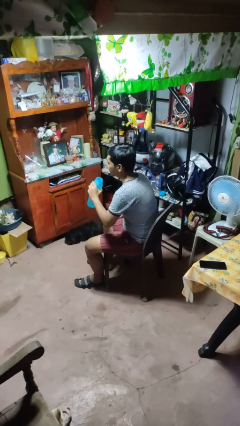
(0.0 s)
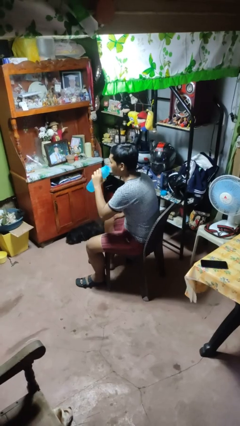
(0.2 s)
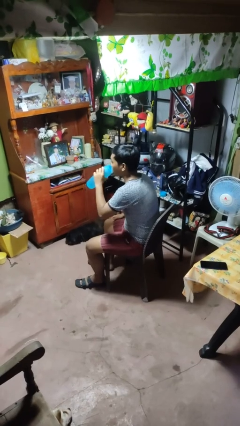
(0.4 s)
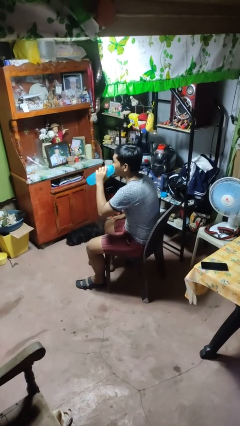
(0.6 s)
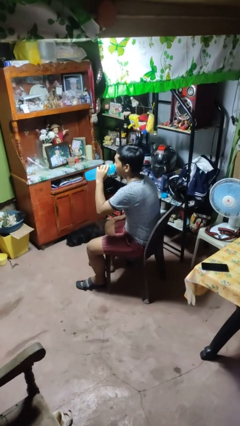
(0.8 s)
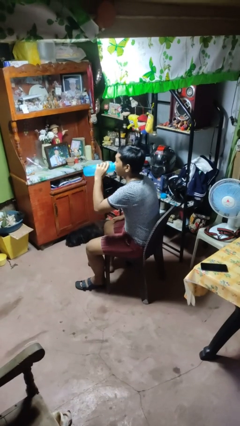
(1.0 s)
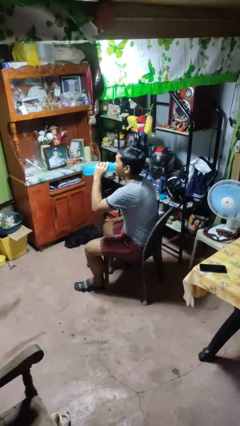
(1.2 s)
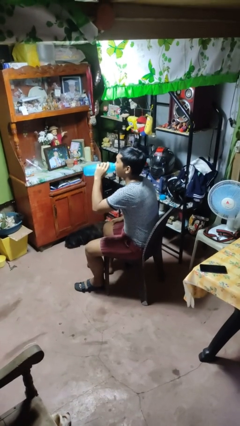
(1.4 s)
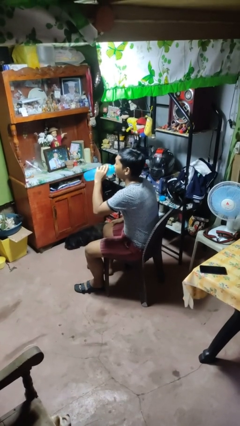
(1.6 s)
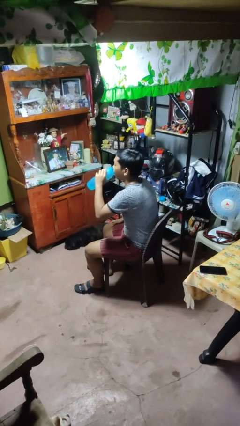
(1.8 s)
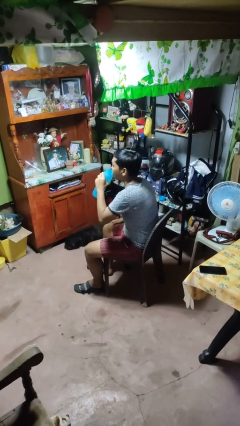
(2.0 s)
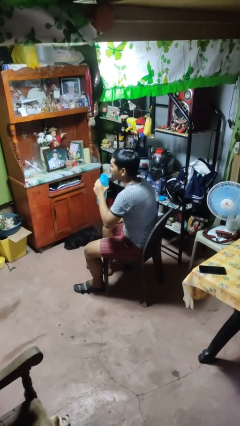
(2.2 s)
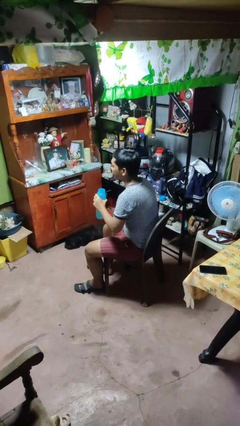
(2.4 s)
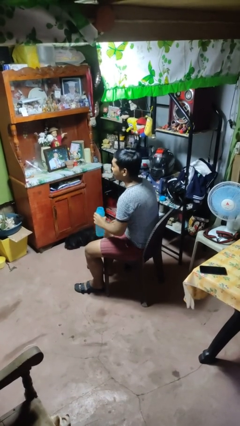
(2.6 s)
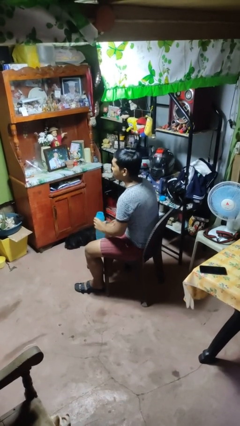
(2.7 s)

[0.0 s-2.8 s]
person drinks from bottle

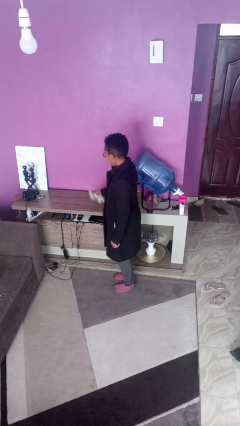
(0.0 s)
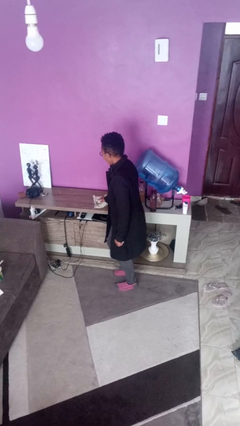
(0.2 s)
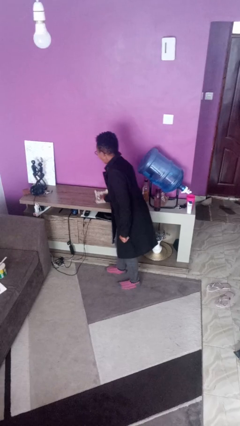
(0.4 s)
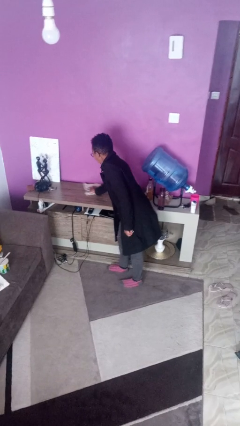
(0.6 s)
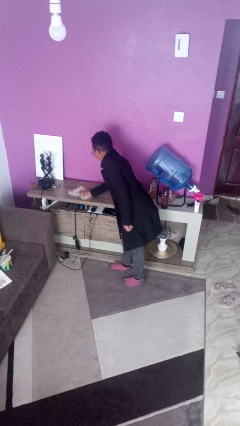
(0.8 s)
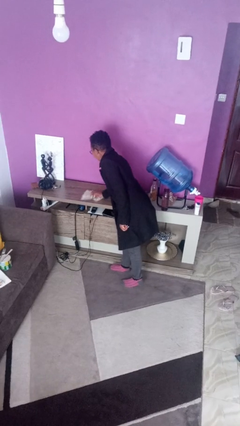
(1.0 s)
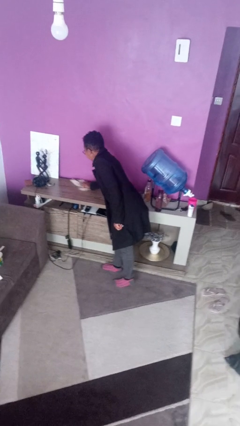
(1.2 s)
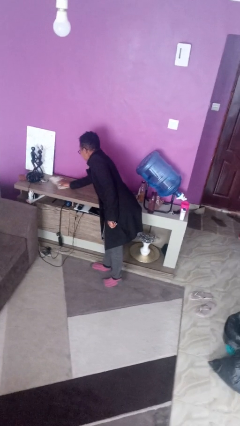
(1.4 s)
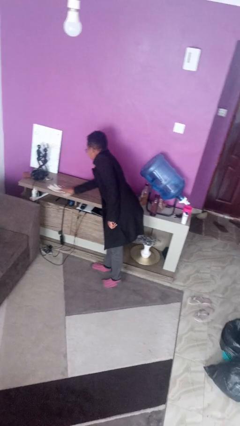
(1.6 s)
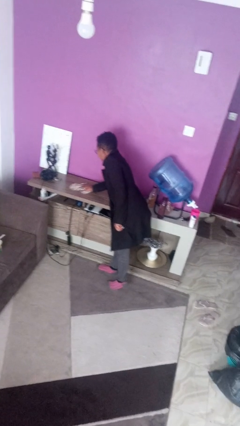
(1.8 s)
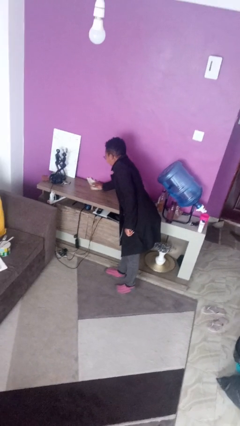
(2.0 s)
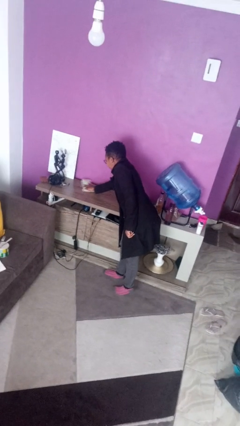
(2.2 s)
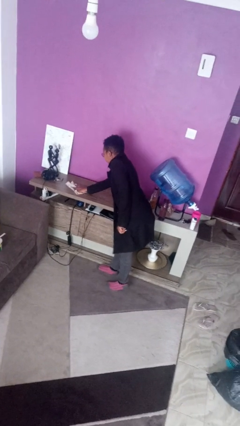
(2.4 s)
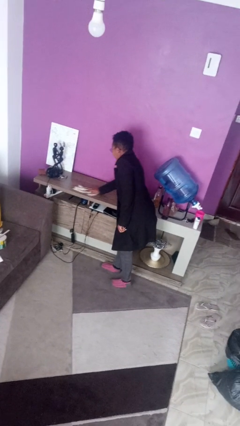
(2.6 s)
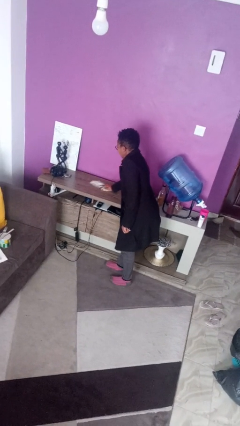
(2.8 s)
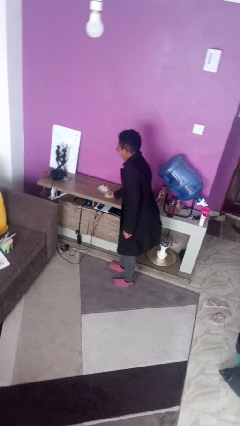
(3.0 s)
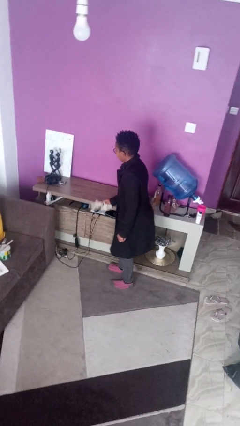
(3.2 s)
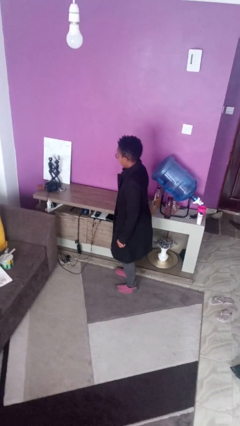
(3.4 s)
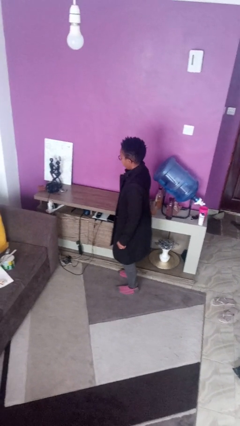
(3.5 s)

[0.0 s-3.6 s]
person cleans table with rag

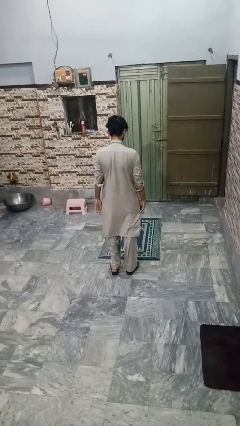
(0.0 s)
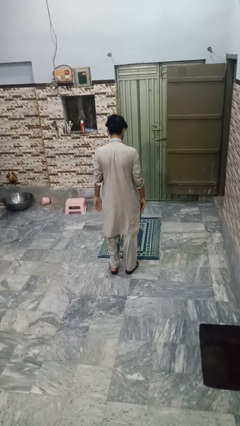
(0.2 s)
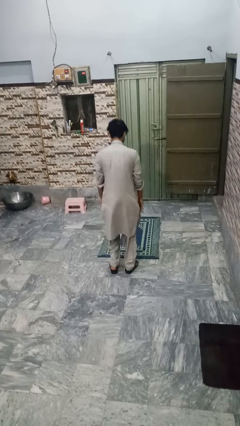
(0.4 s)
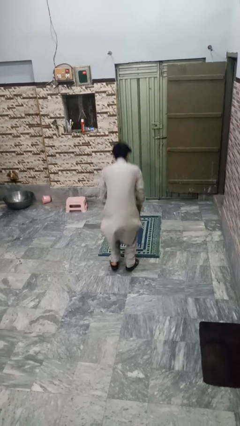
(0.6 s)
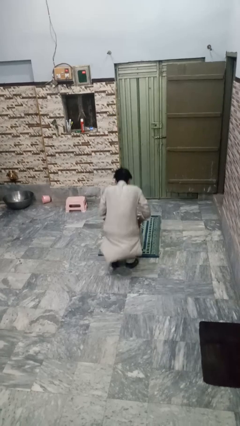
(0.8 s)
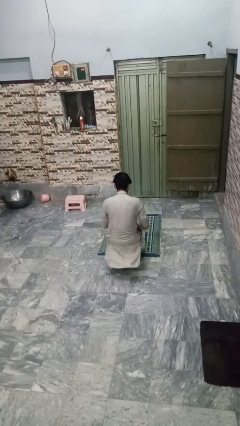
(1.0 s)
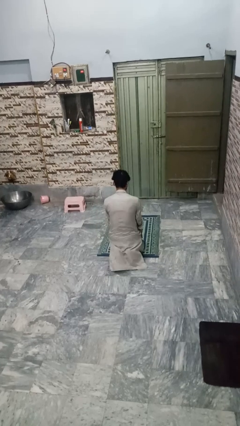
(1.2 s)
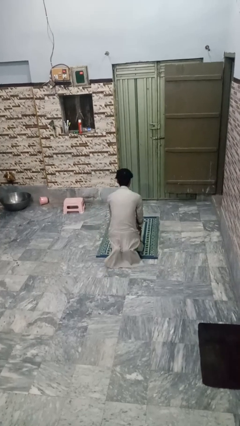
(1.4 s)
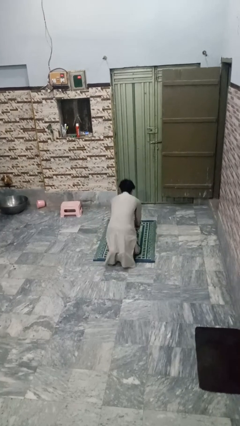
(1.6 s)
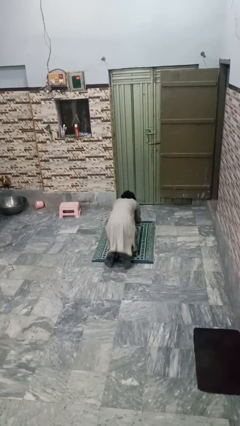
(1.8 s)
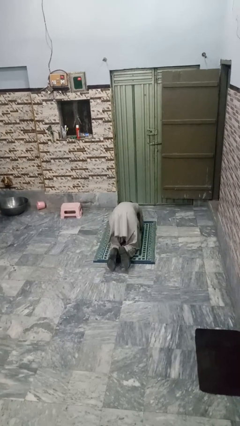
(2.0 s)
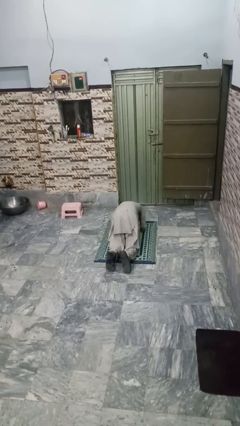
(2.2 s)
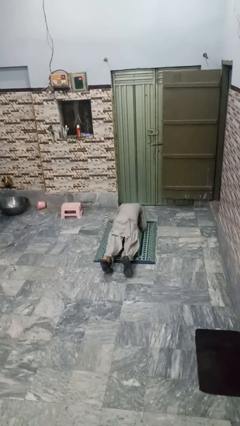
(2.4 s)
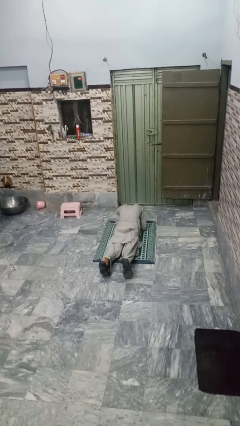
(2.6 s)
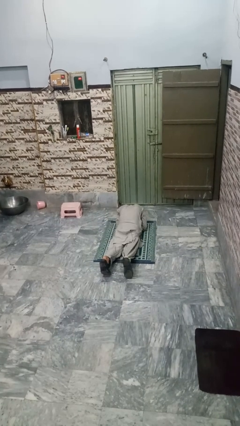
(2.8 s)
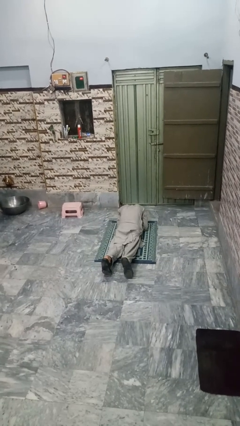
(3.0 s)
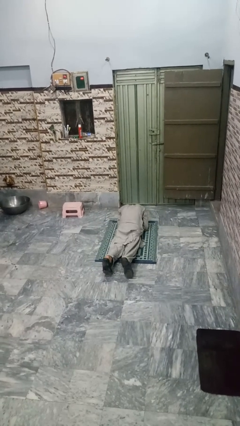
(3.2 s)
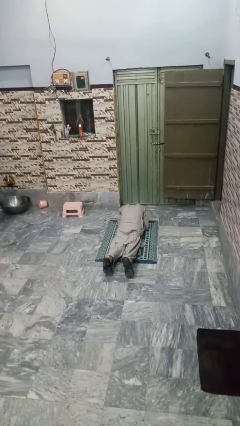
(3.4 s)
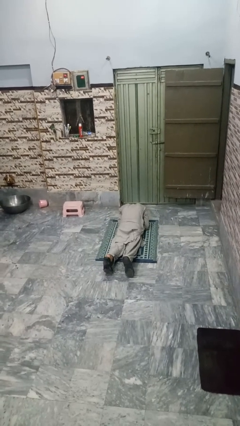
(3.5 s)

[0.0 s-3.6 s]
person exercises with plank

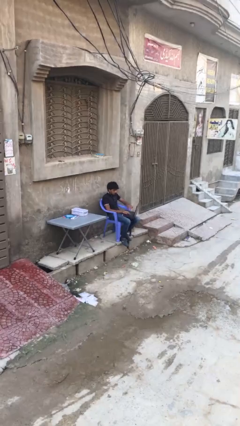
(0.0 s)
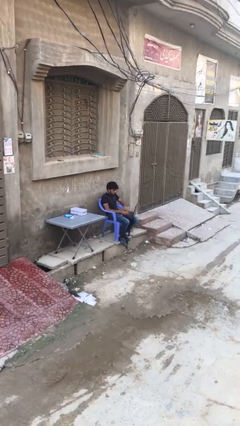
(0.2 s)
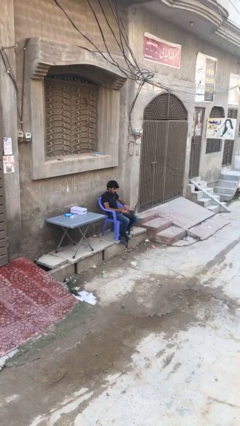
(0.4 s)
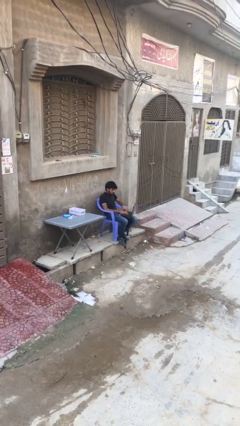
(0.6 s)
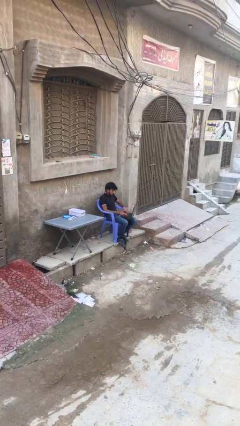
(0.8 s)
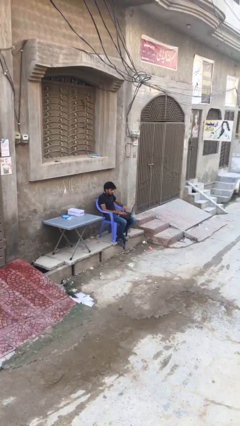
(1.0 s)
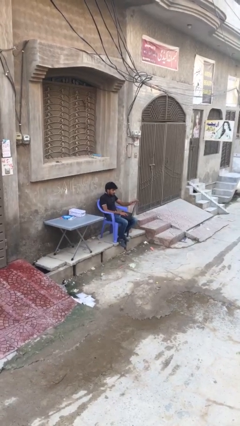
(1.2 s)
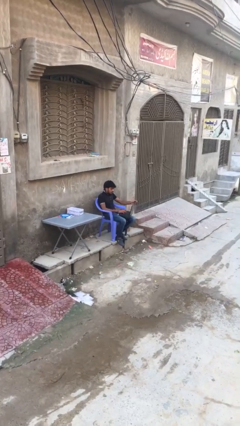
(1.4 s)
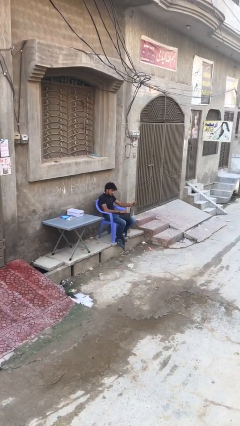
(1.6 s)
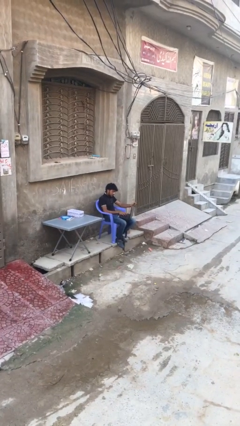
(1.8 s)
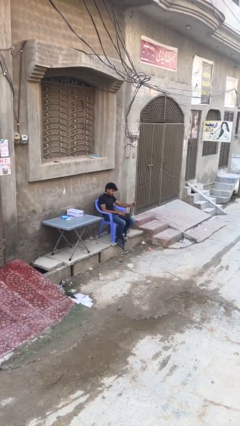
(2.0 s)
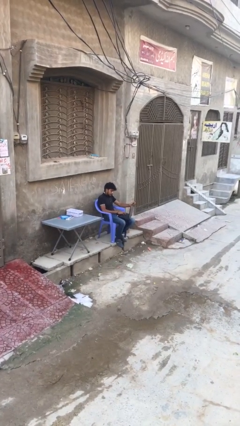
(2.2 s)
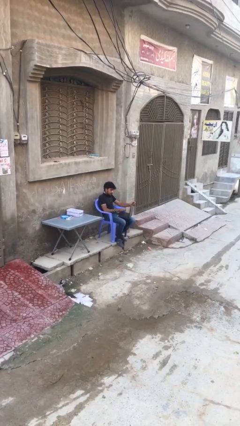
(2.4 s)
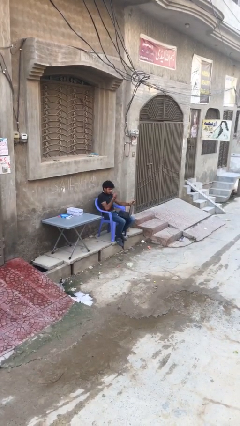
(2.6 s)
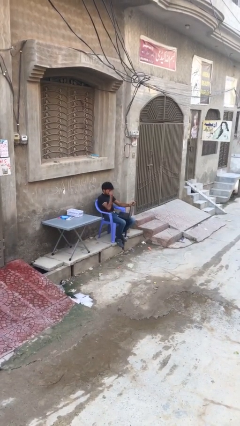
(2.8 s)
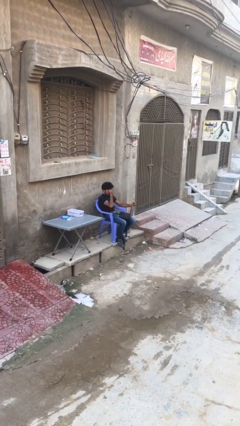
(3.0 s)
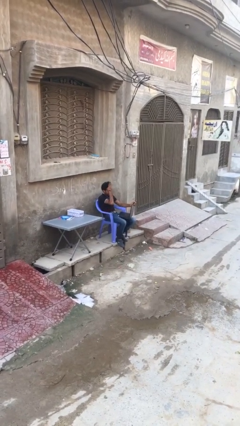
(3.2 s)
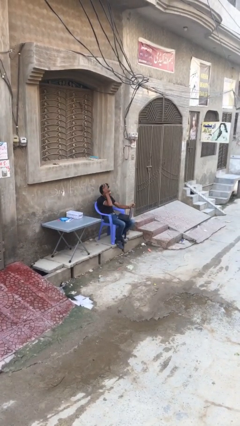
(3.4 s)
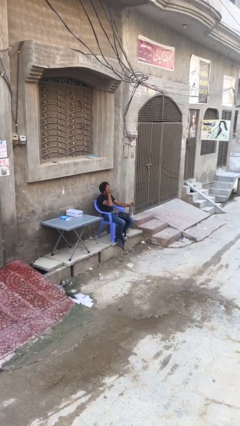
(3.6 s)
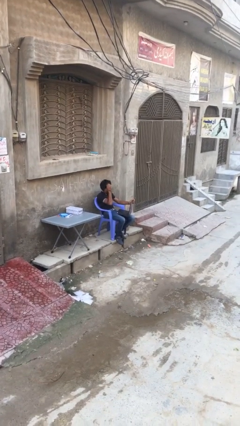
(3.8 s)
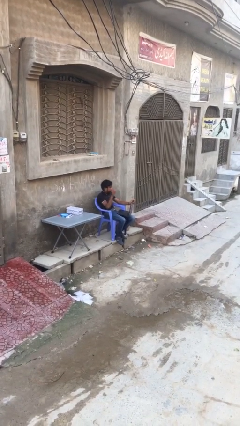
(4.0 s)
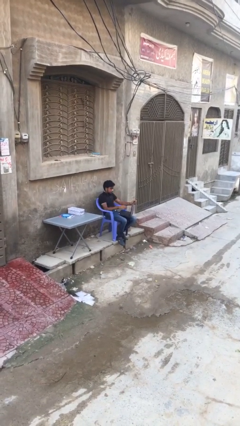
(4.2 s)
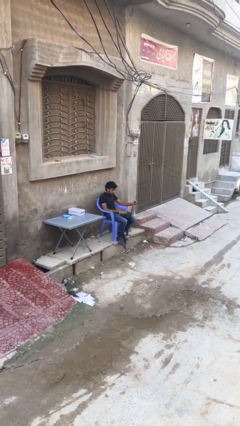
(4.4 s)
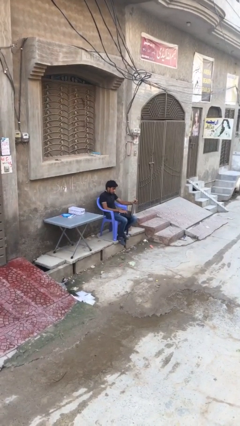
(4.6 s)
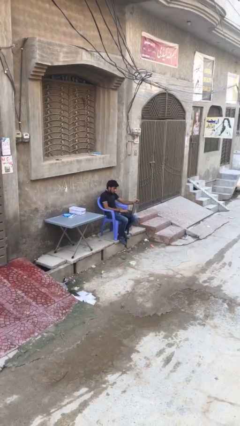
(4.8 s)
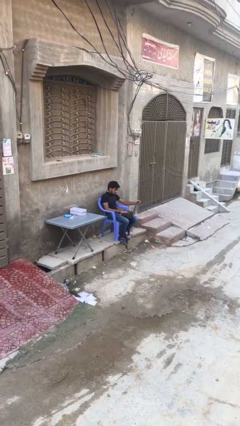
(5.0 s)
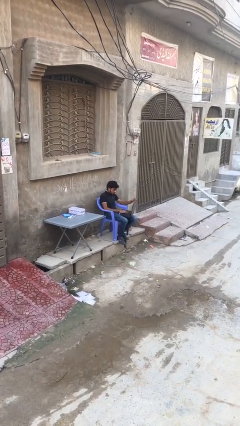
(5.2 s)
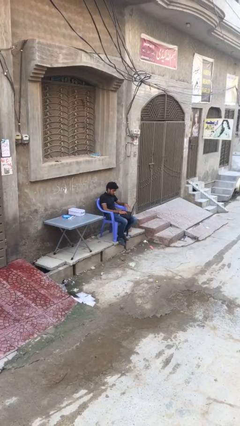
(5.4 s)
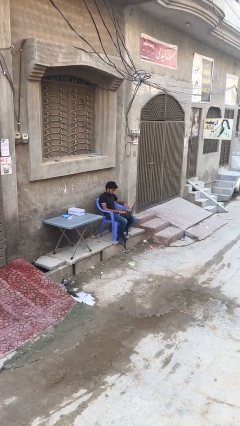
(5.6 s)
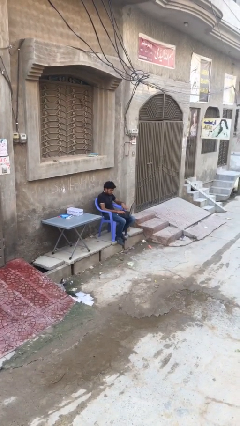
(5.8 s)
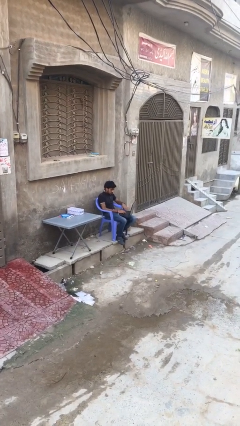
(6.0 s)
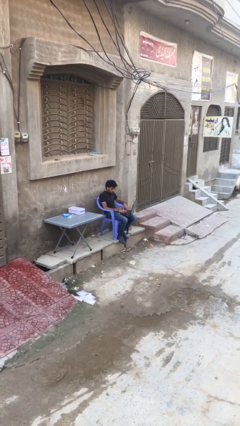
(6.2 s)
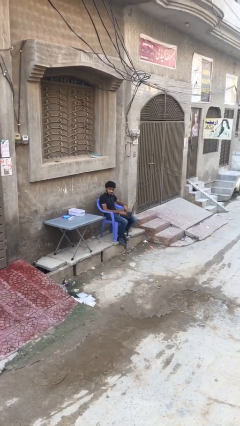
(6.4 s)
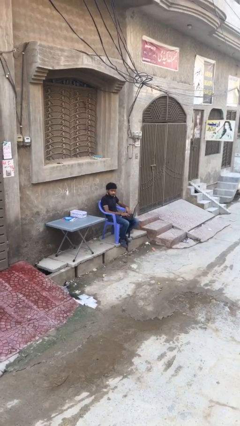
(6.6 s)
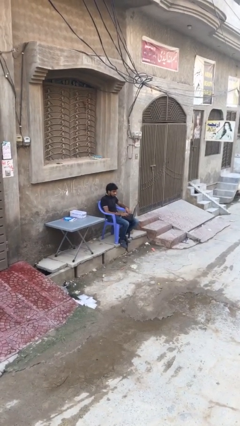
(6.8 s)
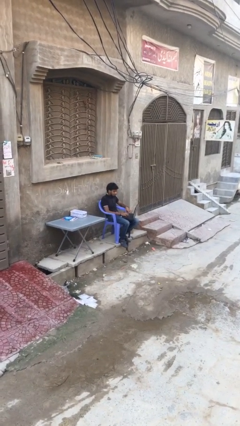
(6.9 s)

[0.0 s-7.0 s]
person interacts with laptop

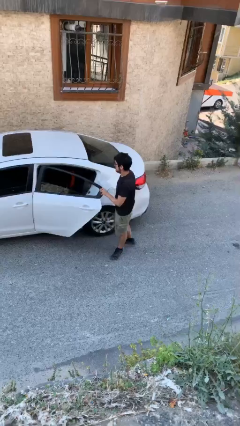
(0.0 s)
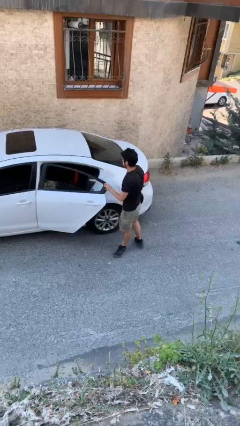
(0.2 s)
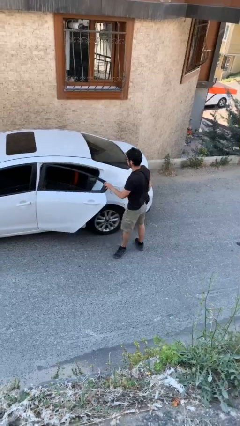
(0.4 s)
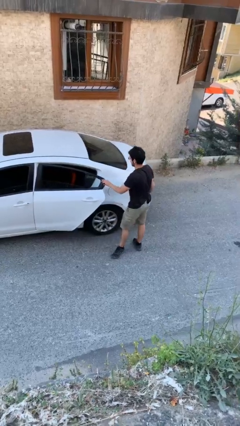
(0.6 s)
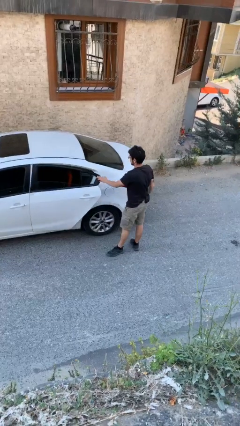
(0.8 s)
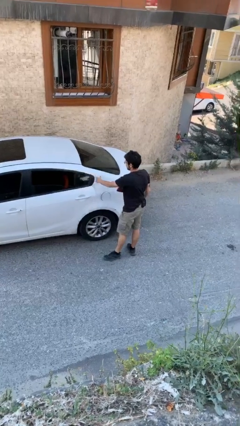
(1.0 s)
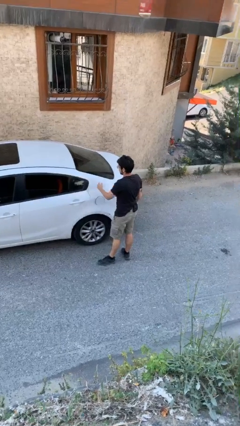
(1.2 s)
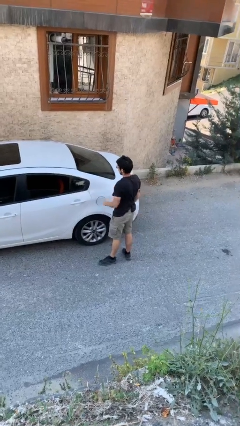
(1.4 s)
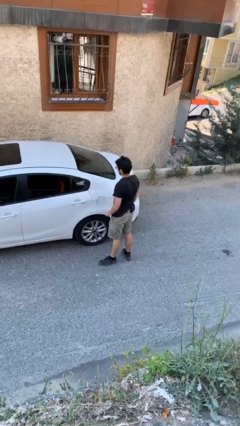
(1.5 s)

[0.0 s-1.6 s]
person closes car door
